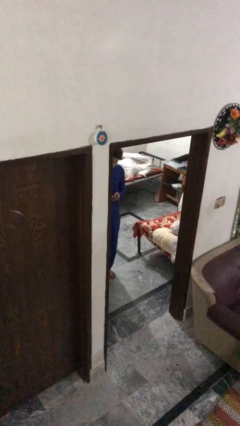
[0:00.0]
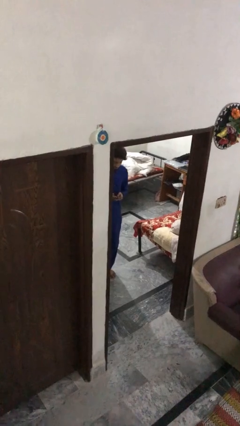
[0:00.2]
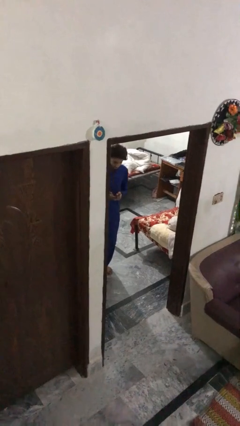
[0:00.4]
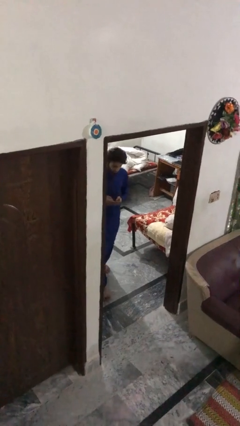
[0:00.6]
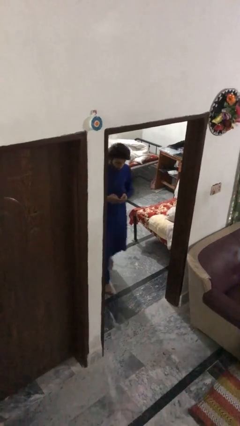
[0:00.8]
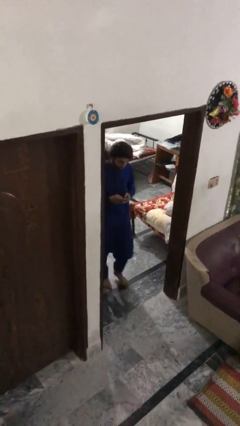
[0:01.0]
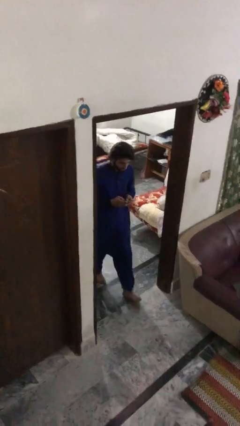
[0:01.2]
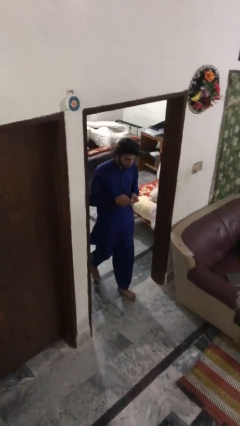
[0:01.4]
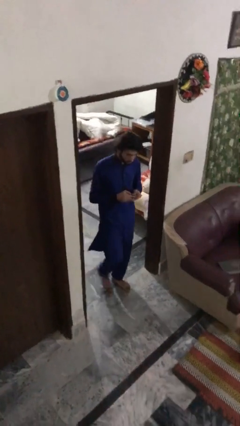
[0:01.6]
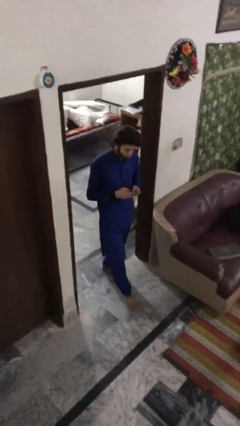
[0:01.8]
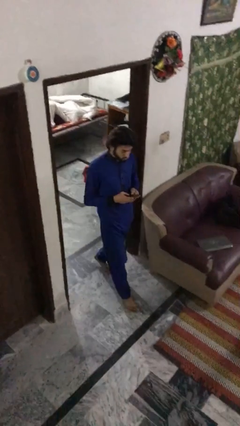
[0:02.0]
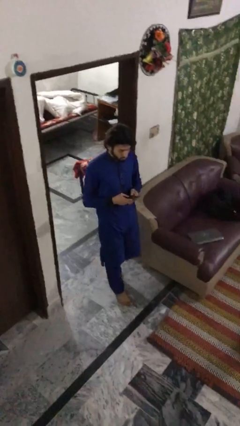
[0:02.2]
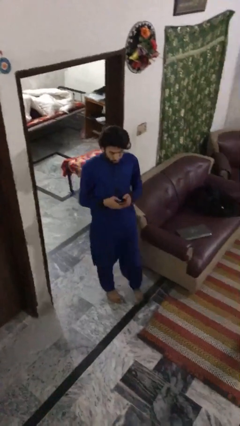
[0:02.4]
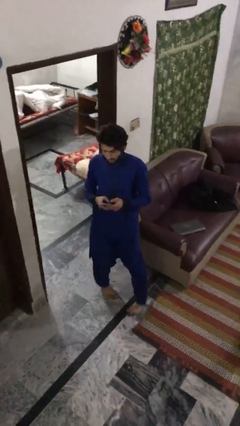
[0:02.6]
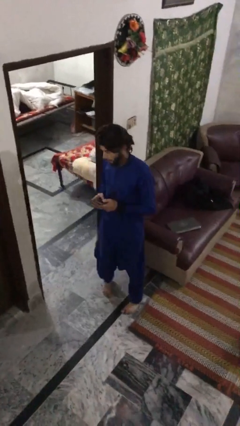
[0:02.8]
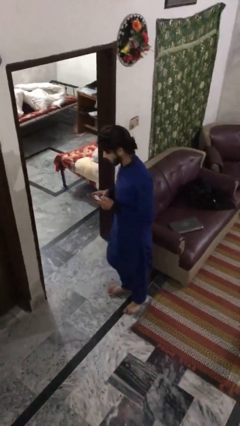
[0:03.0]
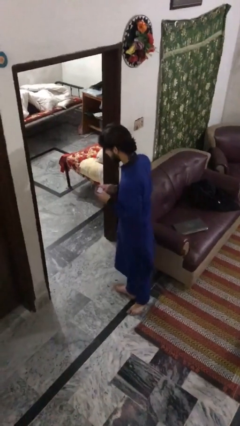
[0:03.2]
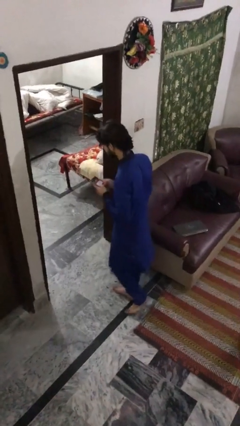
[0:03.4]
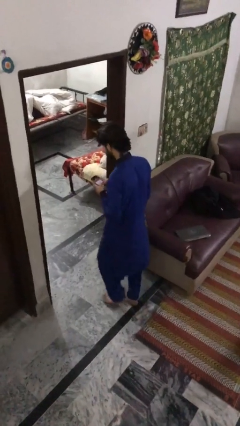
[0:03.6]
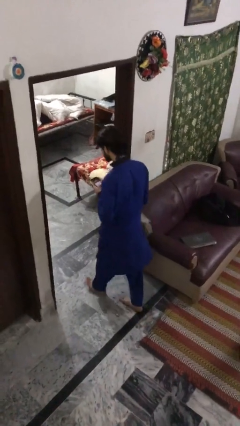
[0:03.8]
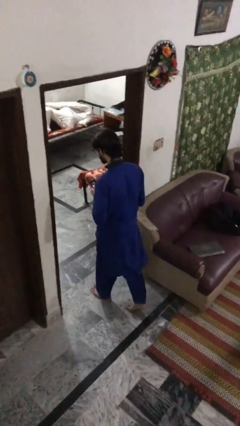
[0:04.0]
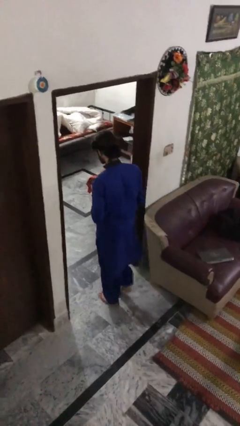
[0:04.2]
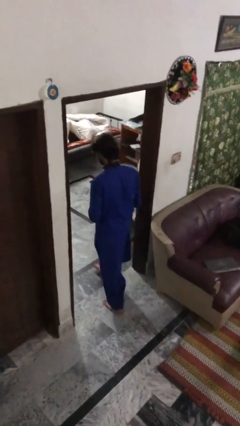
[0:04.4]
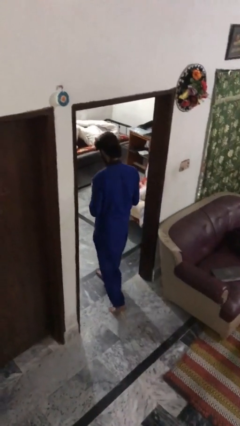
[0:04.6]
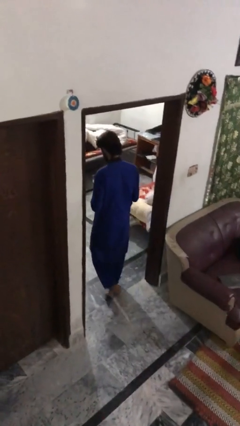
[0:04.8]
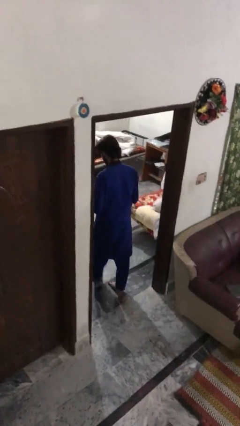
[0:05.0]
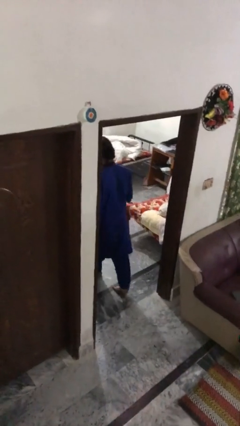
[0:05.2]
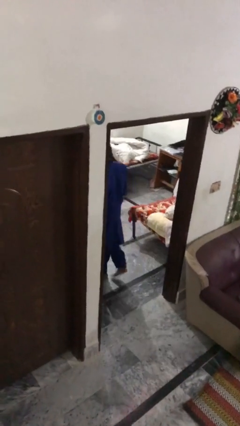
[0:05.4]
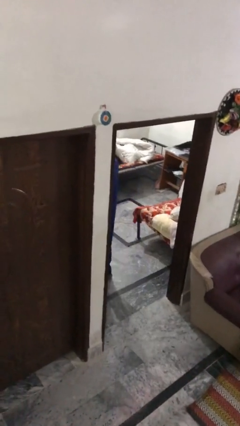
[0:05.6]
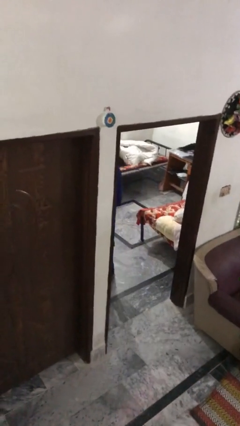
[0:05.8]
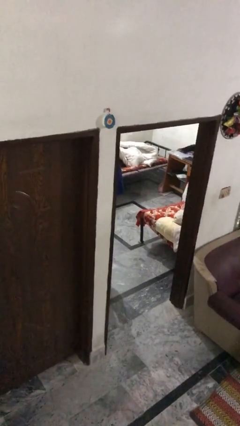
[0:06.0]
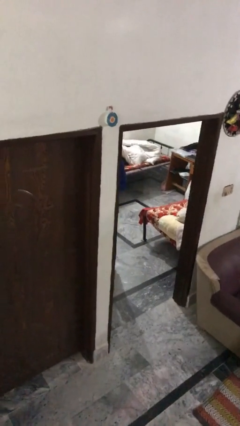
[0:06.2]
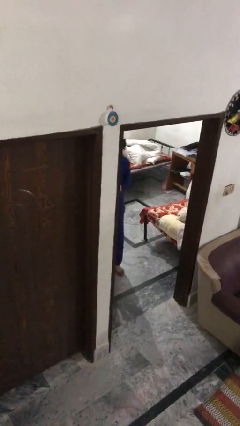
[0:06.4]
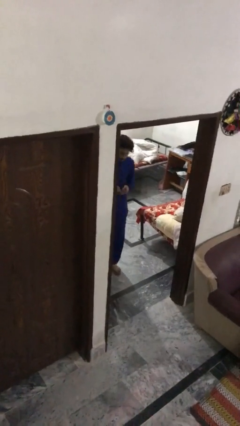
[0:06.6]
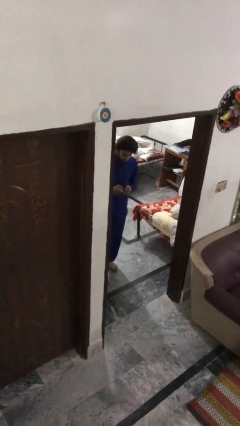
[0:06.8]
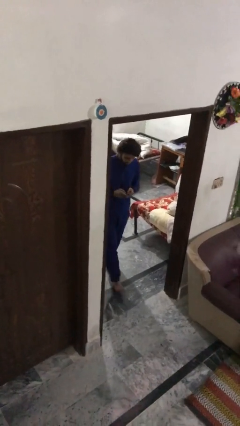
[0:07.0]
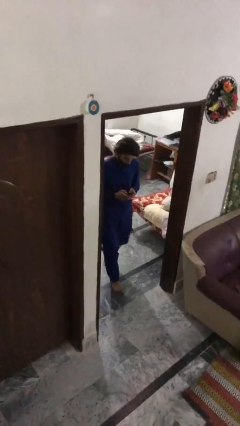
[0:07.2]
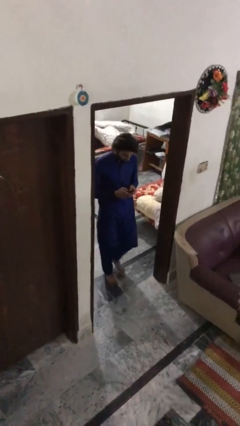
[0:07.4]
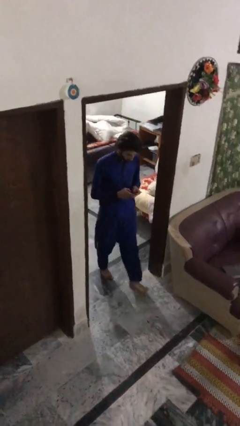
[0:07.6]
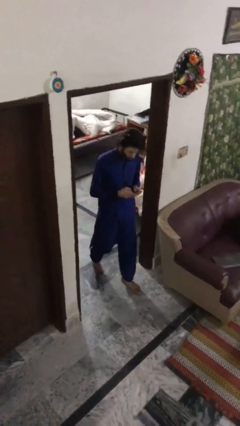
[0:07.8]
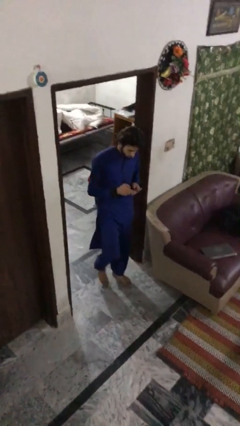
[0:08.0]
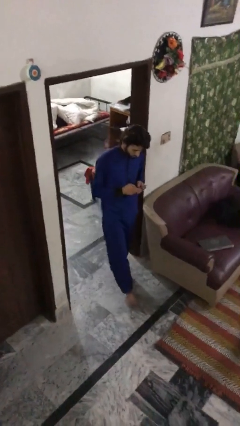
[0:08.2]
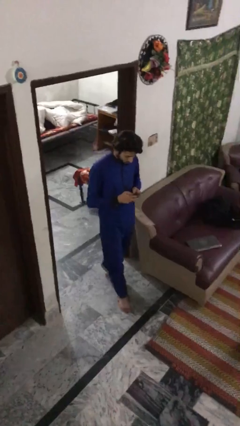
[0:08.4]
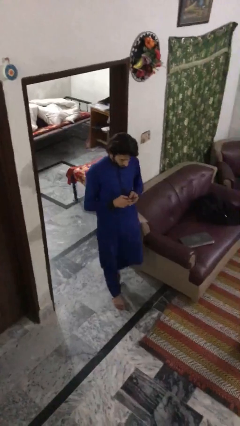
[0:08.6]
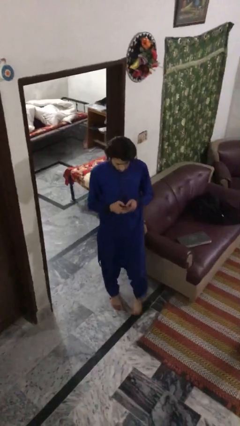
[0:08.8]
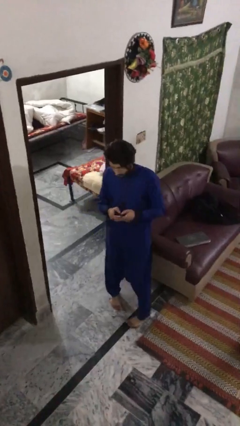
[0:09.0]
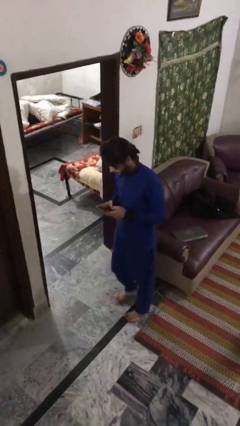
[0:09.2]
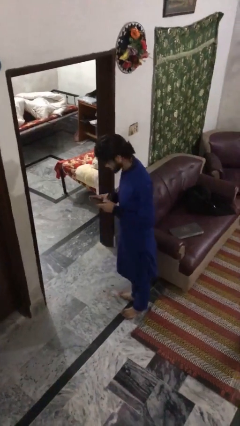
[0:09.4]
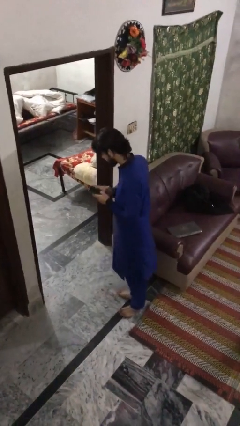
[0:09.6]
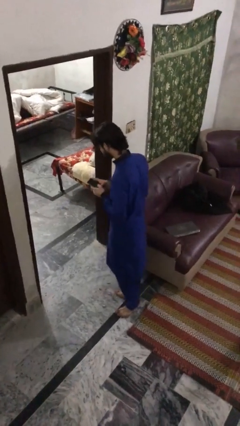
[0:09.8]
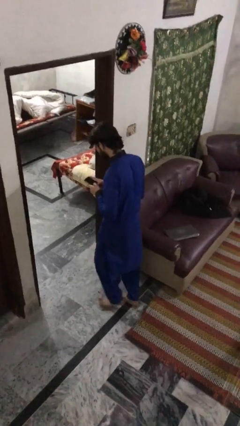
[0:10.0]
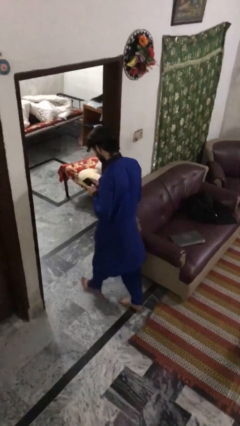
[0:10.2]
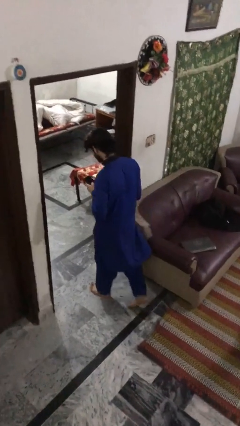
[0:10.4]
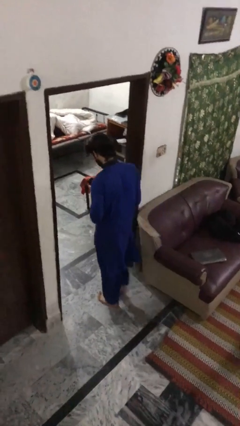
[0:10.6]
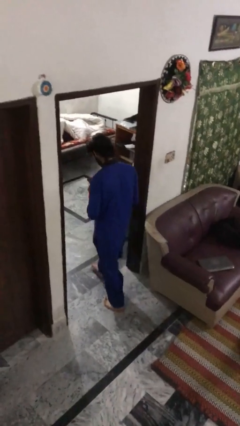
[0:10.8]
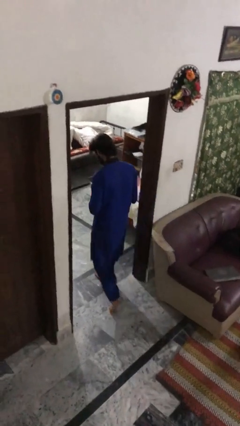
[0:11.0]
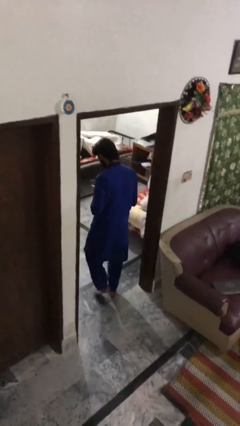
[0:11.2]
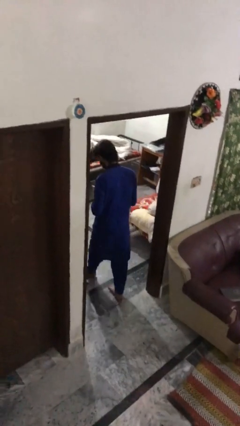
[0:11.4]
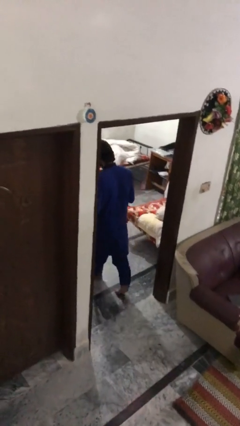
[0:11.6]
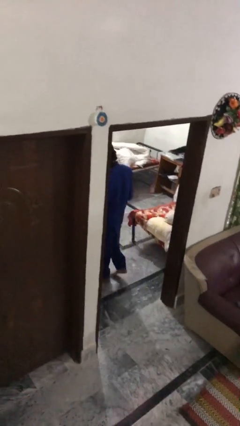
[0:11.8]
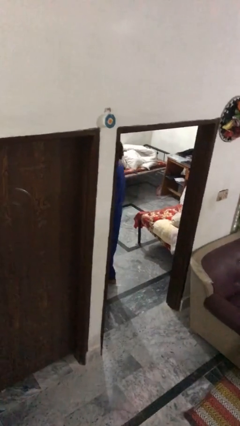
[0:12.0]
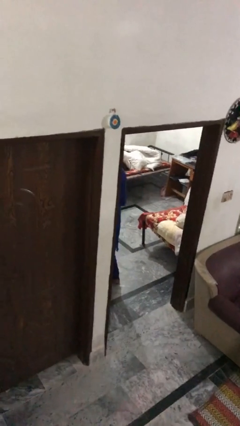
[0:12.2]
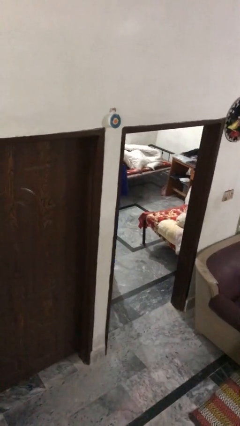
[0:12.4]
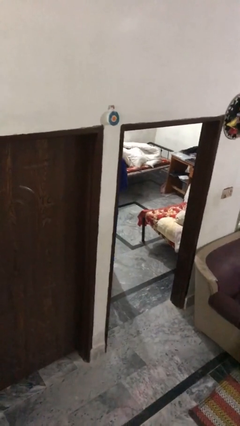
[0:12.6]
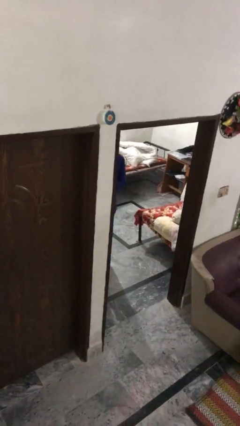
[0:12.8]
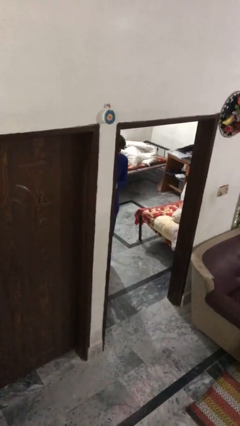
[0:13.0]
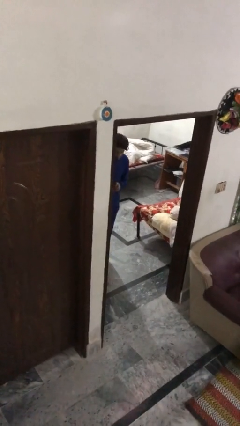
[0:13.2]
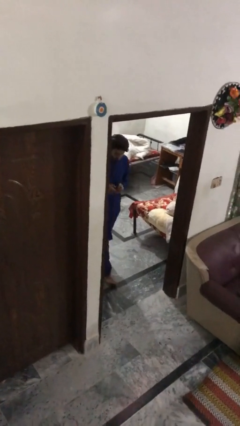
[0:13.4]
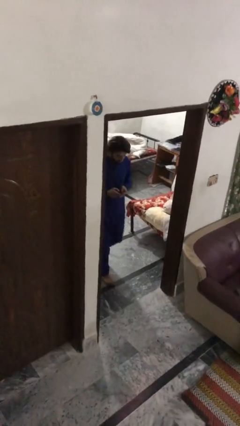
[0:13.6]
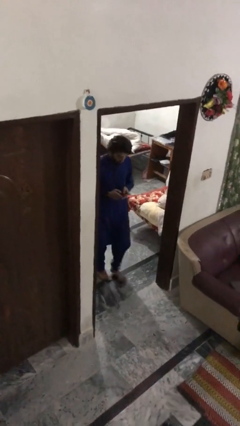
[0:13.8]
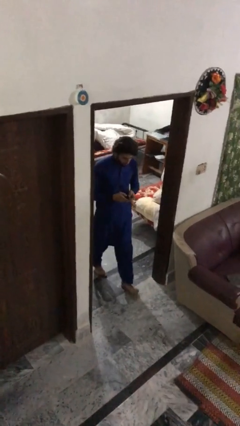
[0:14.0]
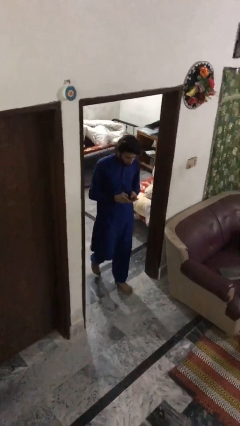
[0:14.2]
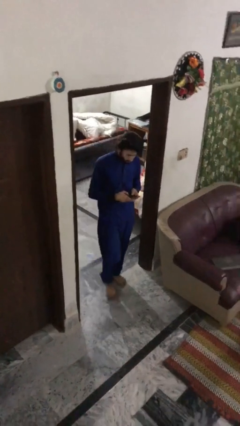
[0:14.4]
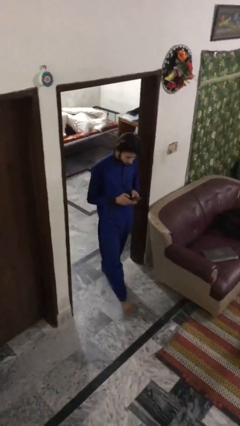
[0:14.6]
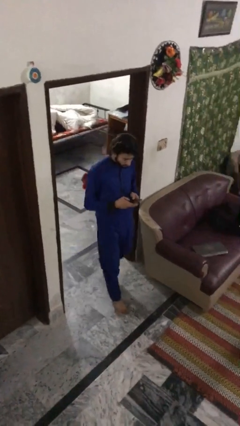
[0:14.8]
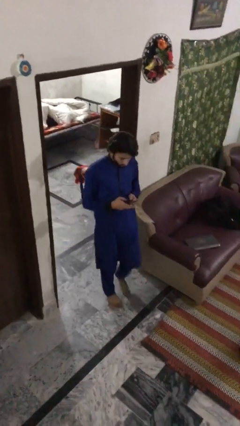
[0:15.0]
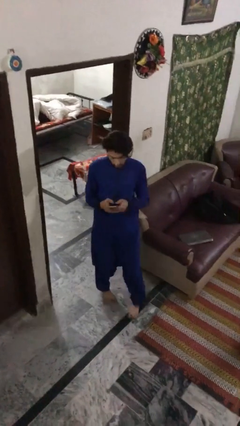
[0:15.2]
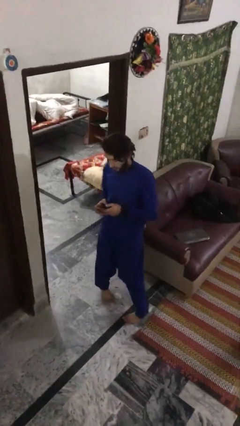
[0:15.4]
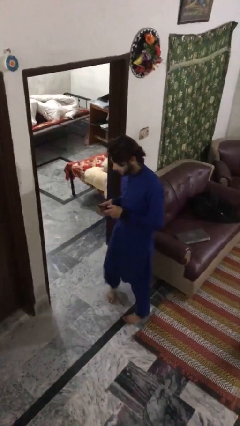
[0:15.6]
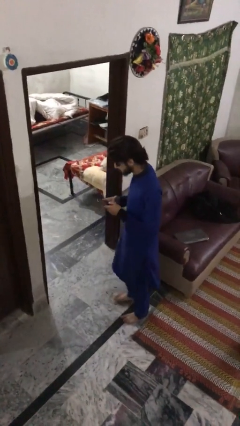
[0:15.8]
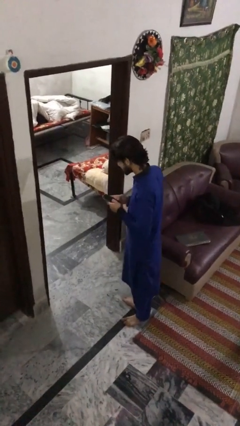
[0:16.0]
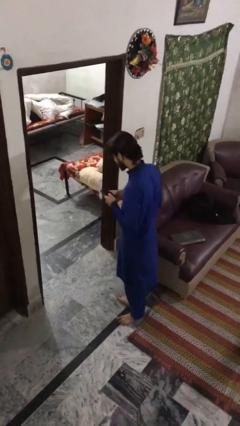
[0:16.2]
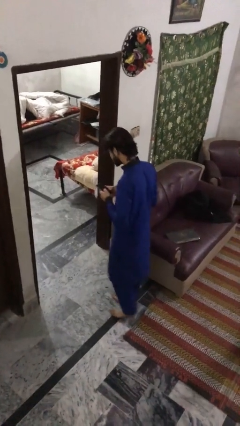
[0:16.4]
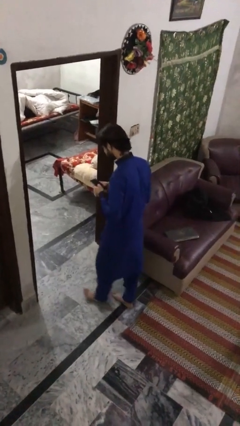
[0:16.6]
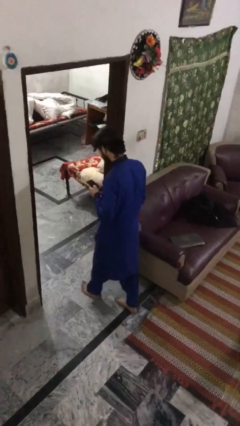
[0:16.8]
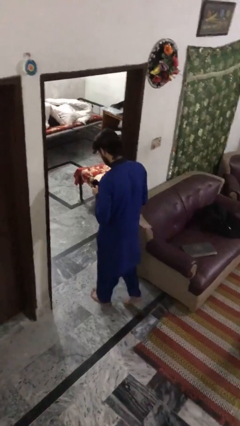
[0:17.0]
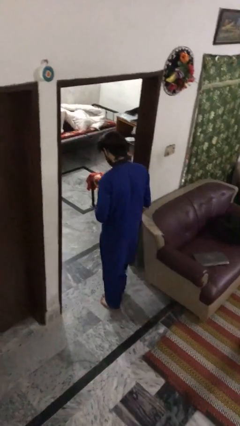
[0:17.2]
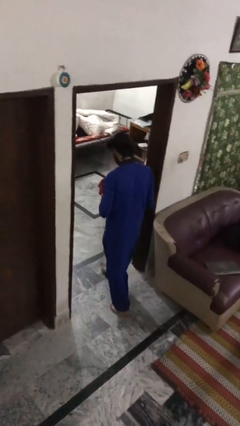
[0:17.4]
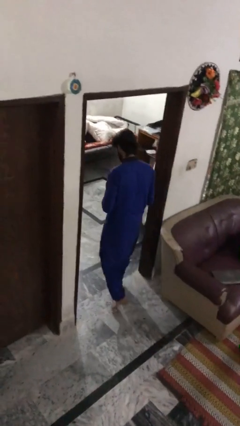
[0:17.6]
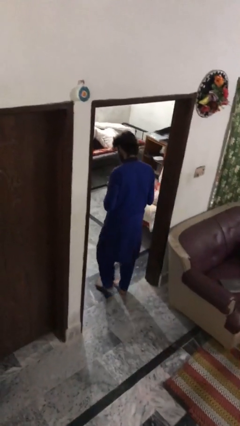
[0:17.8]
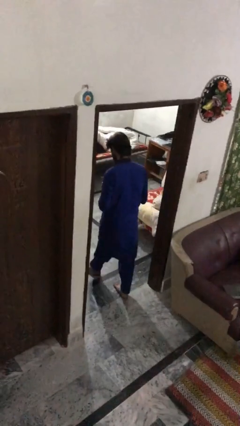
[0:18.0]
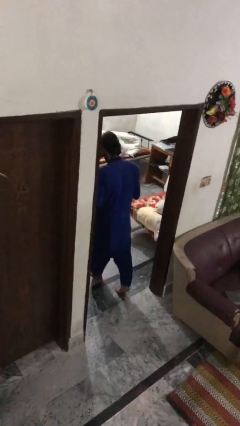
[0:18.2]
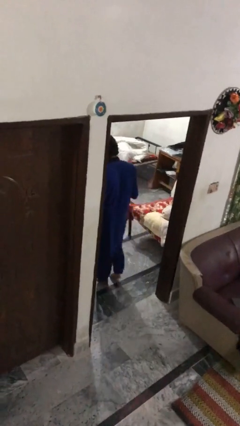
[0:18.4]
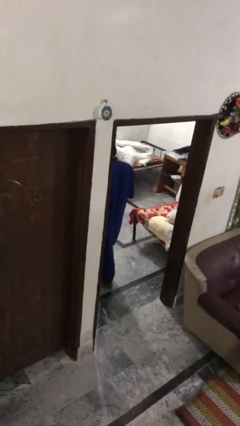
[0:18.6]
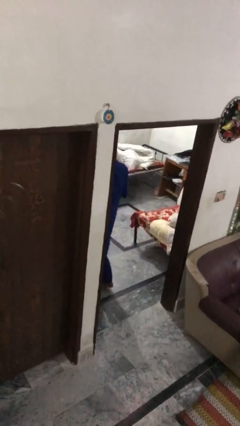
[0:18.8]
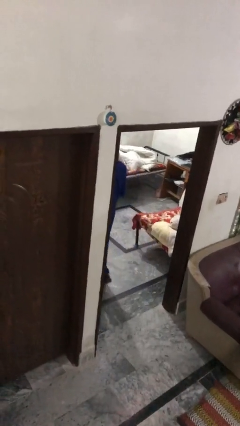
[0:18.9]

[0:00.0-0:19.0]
person texts on phone
